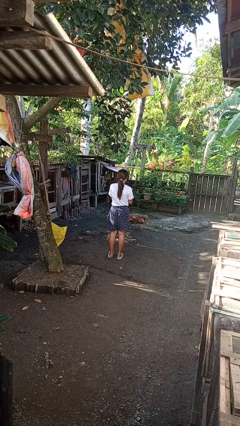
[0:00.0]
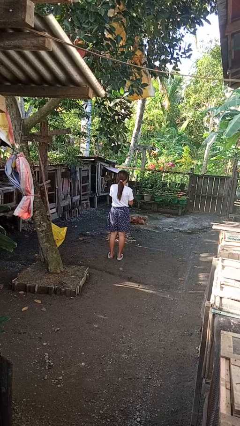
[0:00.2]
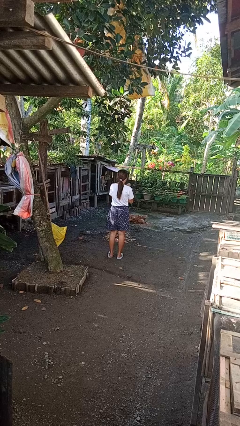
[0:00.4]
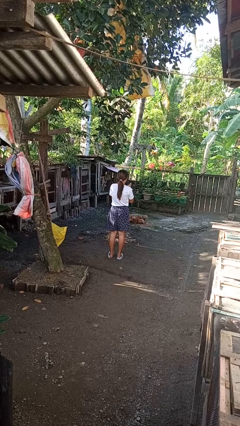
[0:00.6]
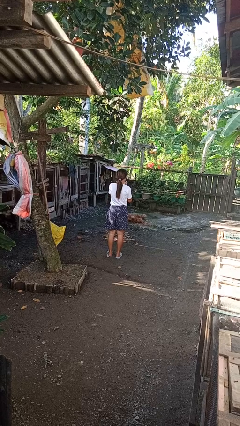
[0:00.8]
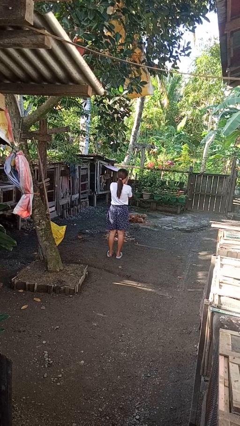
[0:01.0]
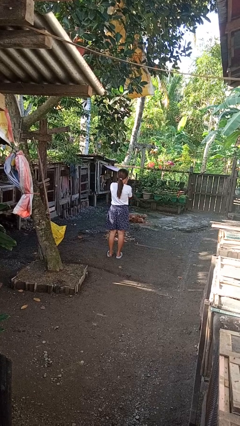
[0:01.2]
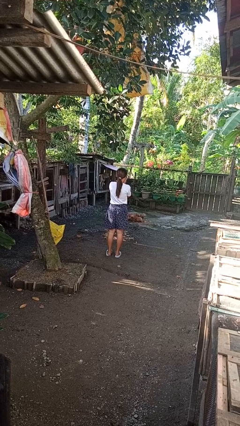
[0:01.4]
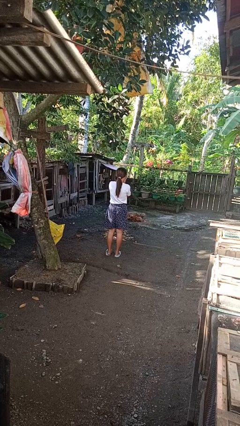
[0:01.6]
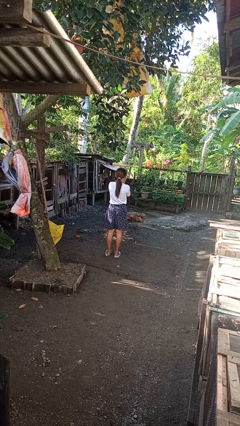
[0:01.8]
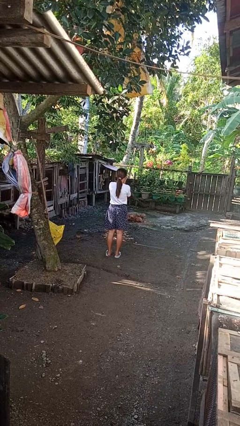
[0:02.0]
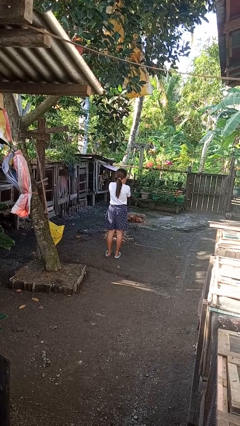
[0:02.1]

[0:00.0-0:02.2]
person blows into hands

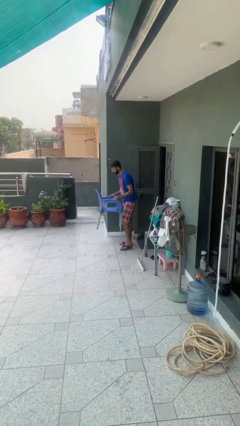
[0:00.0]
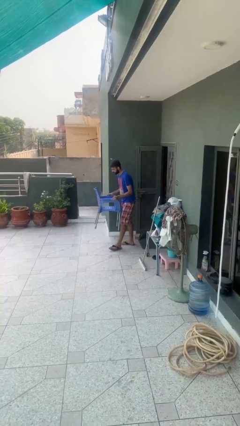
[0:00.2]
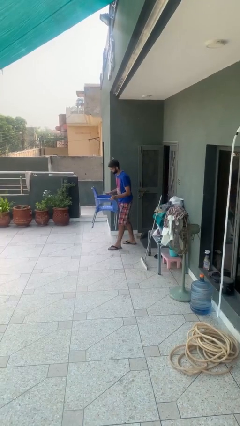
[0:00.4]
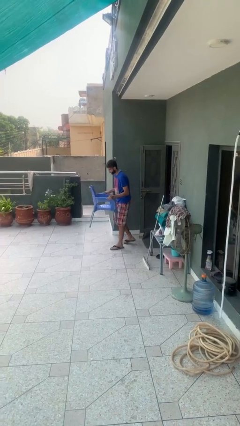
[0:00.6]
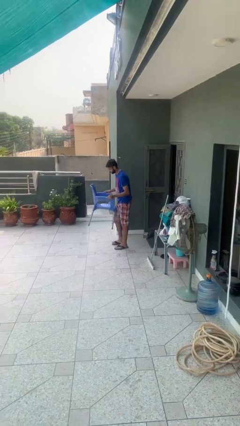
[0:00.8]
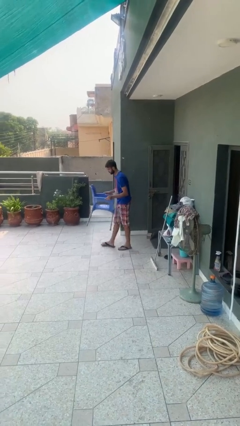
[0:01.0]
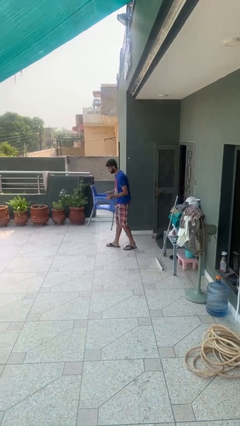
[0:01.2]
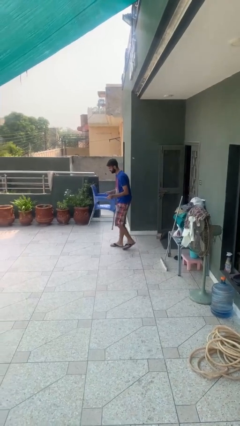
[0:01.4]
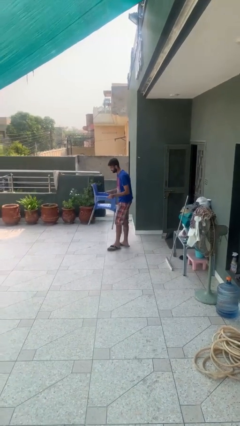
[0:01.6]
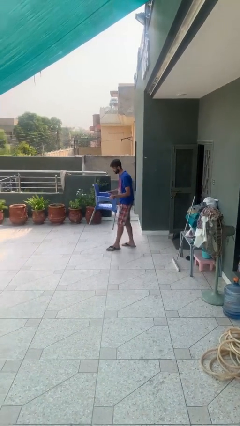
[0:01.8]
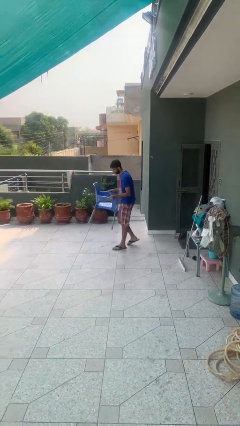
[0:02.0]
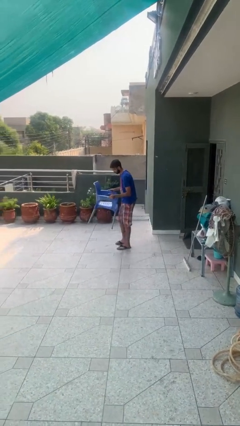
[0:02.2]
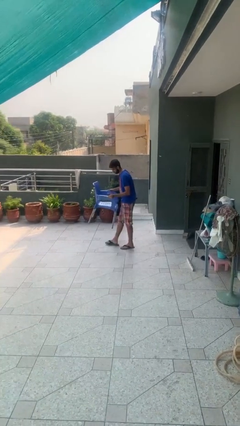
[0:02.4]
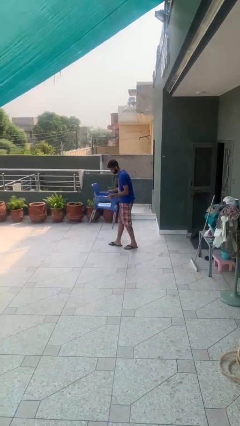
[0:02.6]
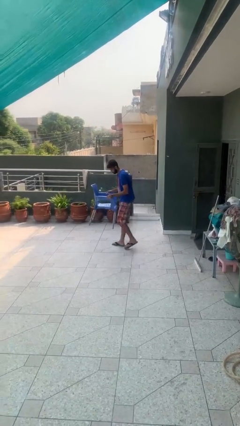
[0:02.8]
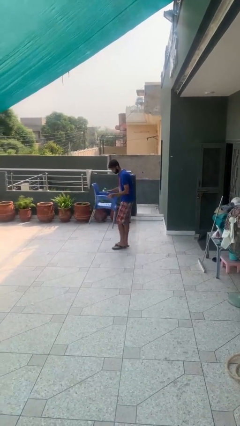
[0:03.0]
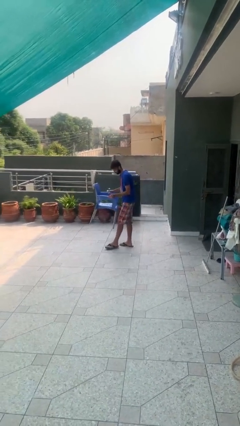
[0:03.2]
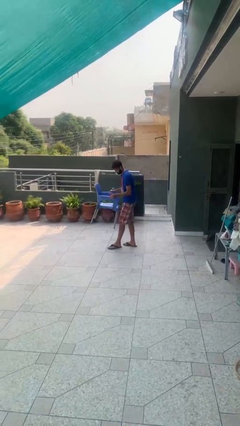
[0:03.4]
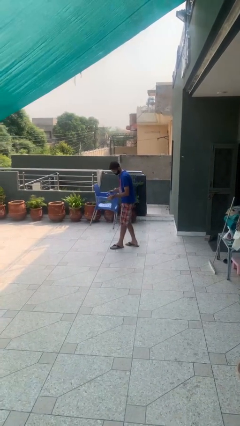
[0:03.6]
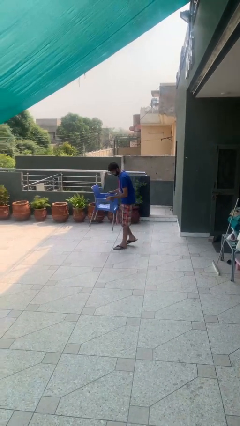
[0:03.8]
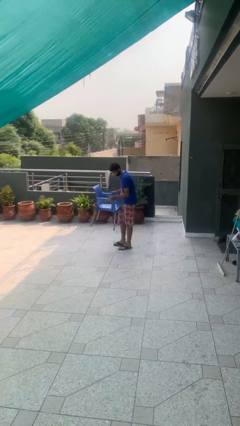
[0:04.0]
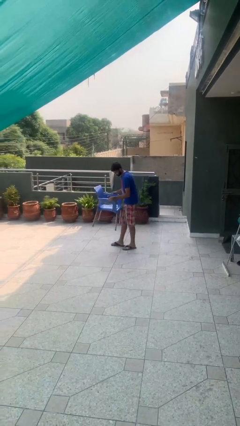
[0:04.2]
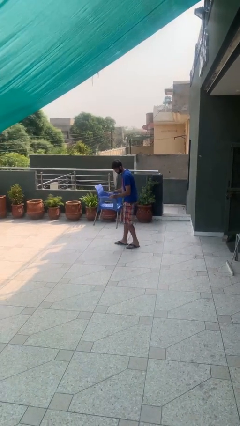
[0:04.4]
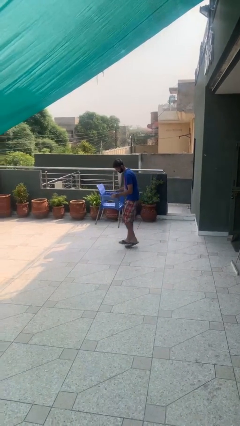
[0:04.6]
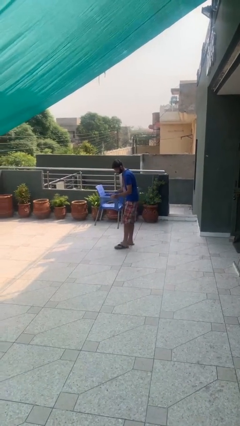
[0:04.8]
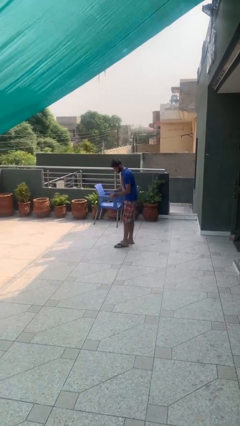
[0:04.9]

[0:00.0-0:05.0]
person carries heavy object

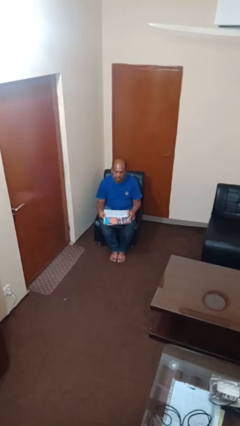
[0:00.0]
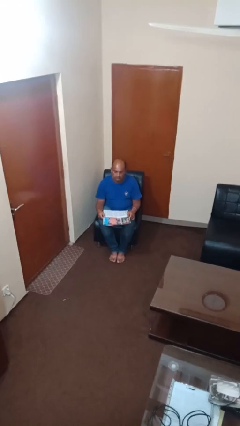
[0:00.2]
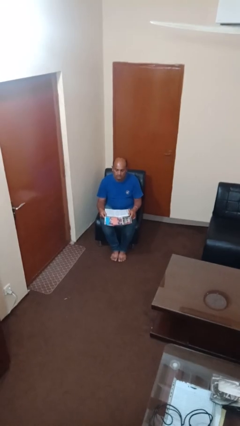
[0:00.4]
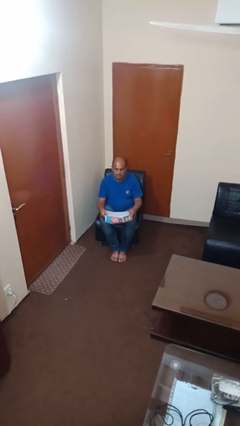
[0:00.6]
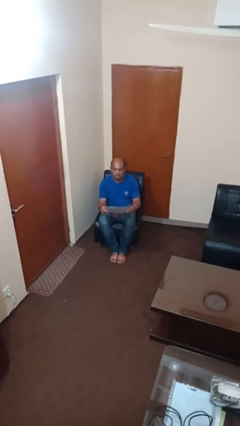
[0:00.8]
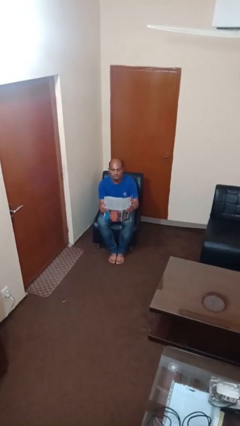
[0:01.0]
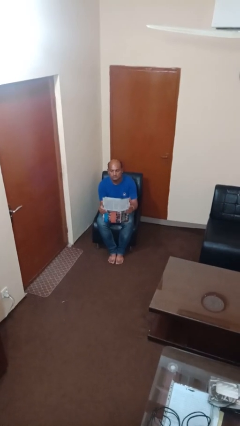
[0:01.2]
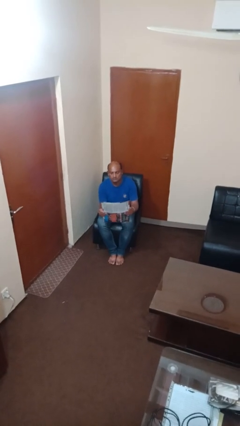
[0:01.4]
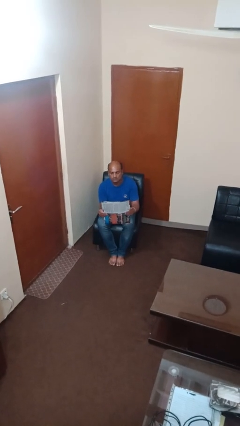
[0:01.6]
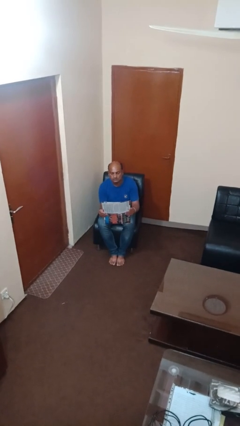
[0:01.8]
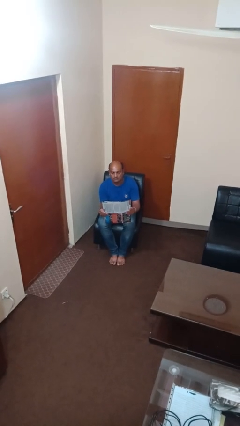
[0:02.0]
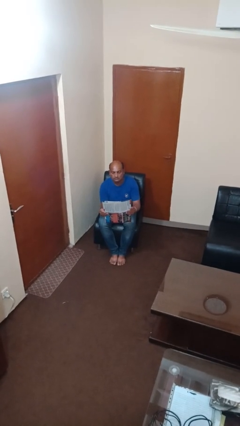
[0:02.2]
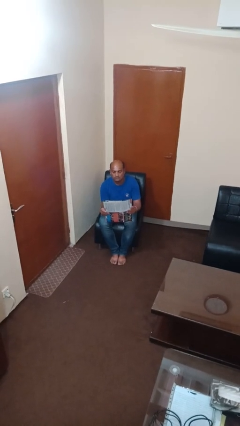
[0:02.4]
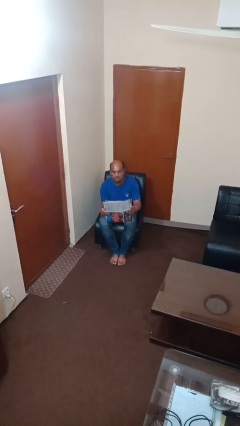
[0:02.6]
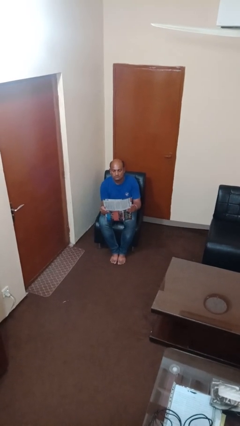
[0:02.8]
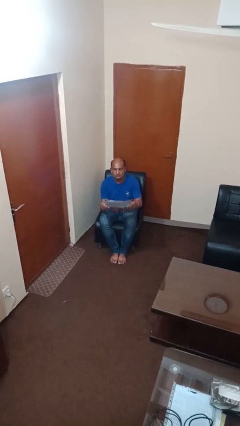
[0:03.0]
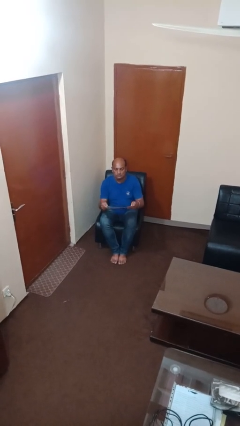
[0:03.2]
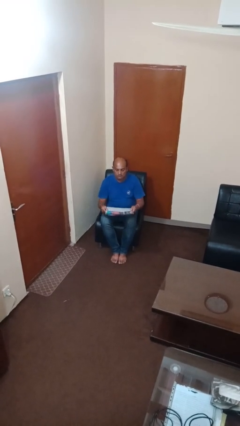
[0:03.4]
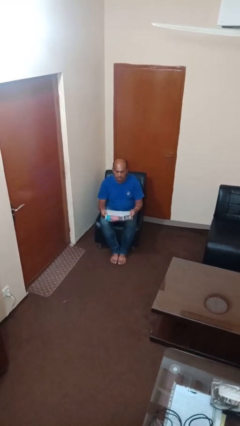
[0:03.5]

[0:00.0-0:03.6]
person reads newspaper

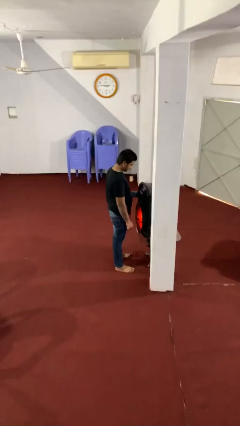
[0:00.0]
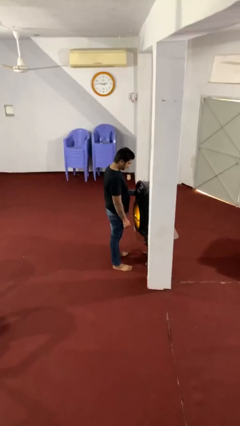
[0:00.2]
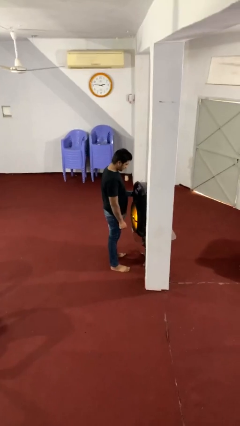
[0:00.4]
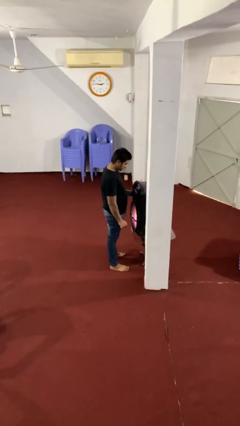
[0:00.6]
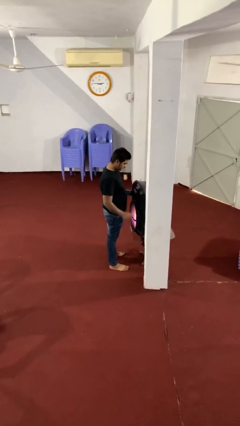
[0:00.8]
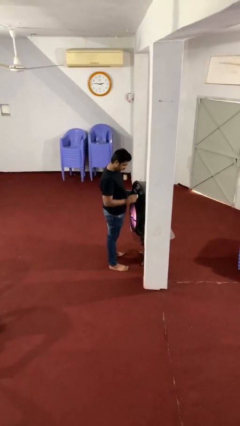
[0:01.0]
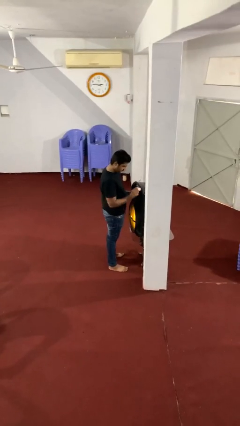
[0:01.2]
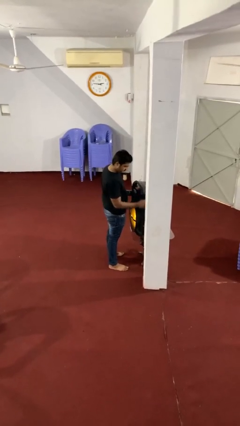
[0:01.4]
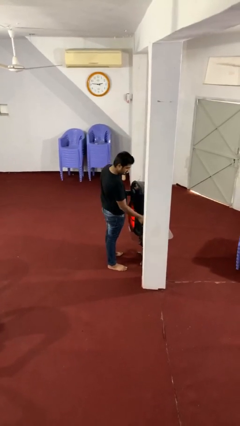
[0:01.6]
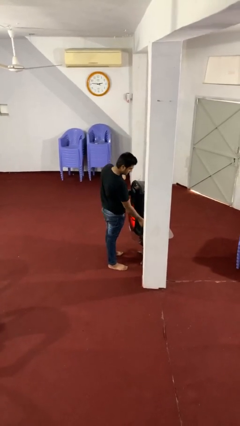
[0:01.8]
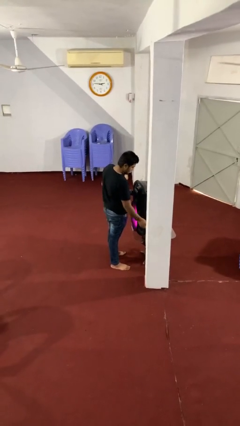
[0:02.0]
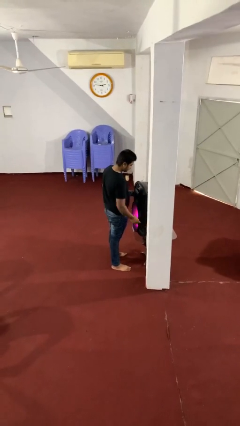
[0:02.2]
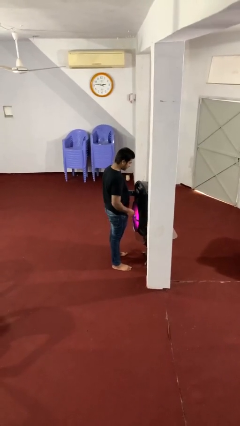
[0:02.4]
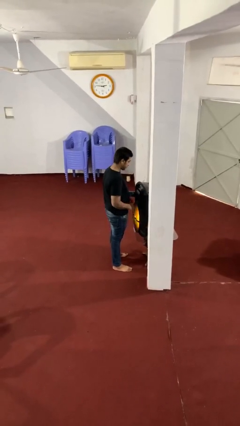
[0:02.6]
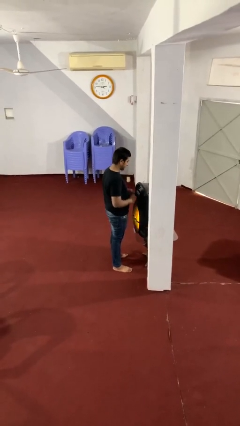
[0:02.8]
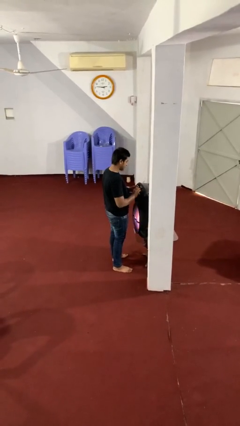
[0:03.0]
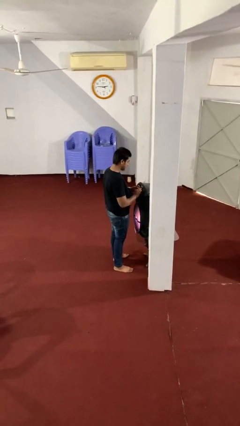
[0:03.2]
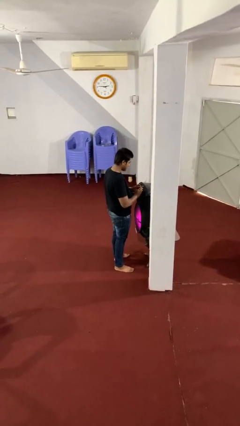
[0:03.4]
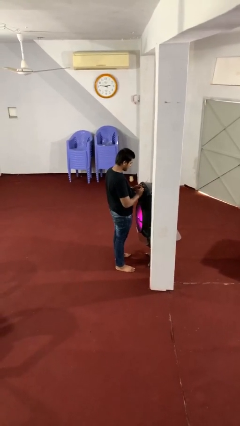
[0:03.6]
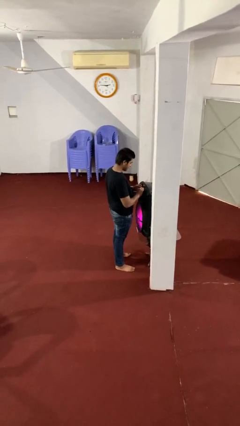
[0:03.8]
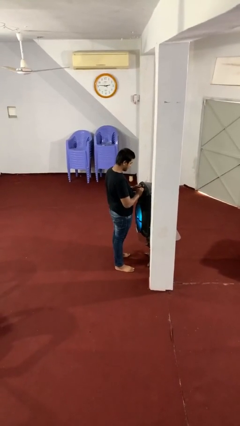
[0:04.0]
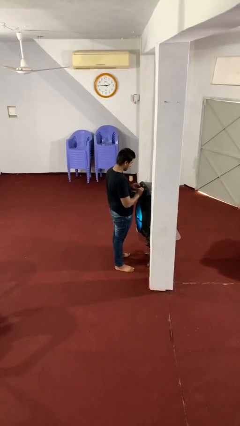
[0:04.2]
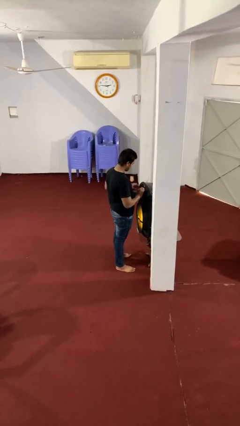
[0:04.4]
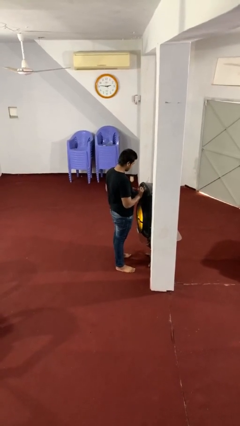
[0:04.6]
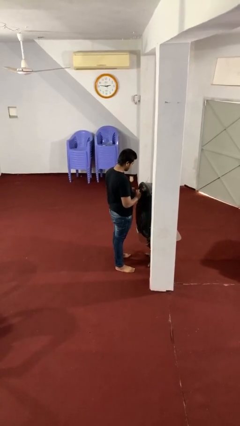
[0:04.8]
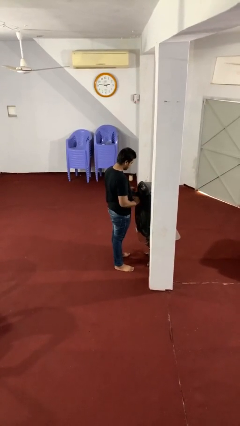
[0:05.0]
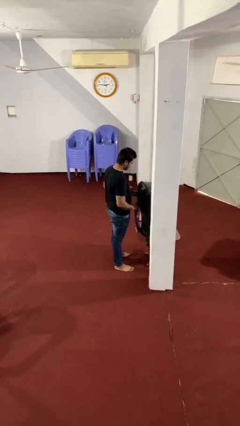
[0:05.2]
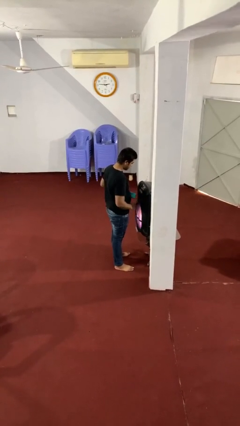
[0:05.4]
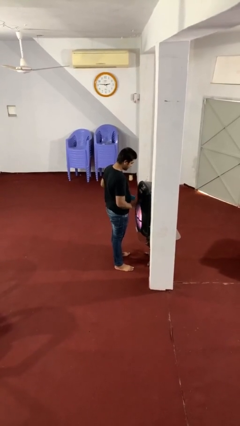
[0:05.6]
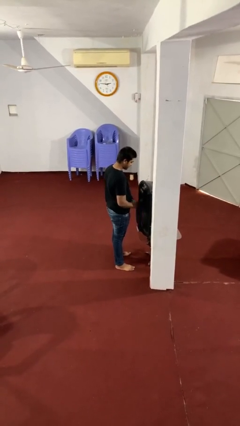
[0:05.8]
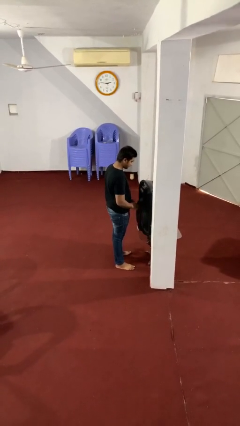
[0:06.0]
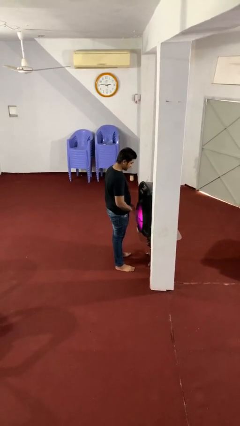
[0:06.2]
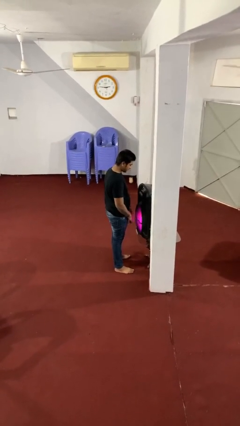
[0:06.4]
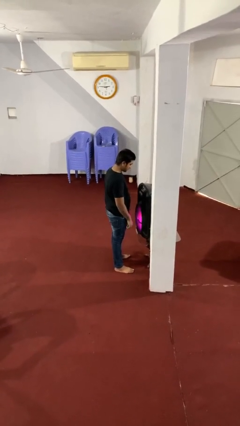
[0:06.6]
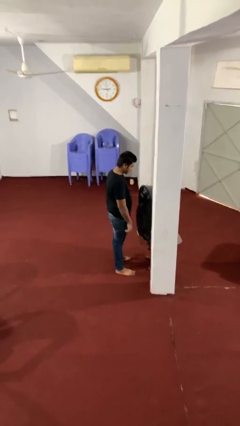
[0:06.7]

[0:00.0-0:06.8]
person purchases from machine
